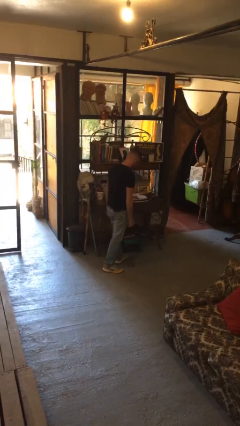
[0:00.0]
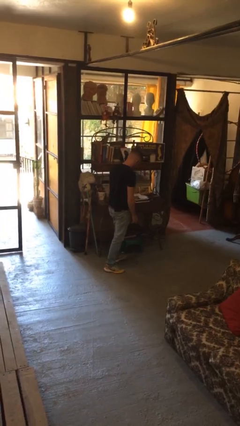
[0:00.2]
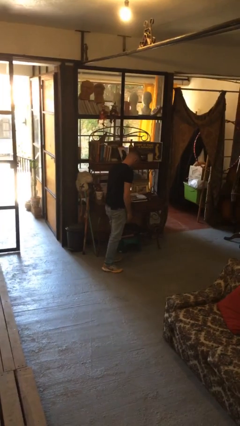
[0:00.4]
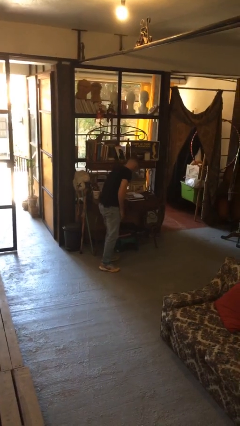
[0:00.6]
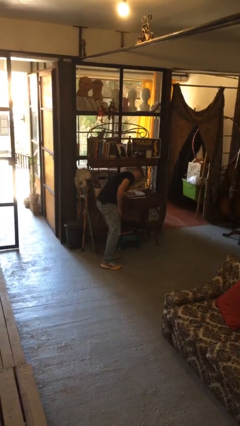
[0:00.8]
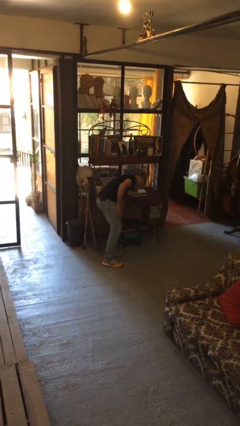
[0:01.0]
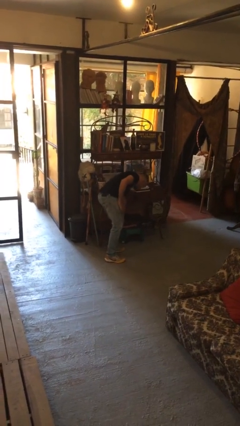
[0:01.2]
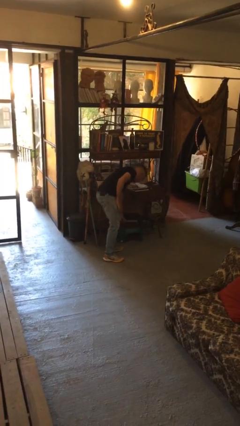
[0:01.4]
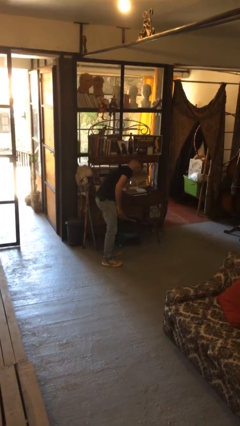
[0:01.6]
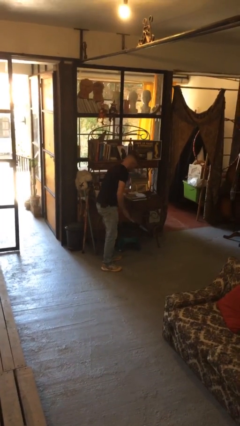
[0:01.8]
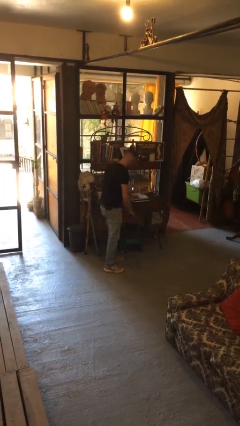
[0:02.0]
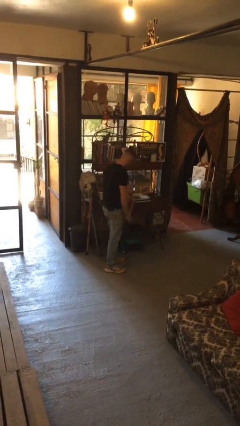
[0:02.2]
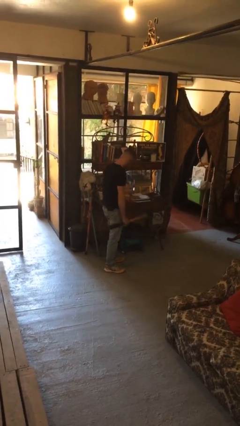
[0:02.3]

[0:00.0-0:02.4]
person picks up object from cabinet

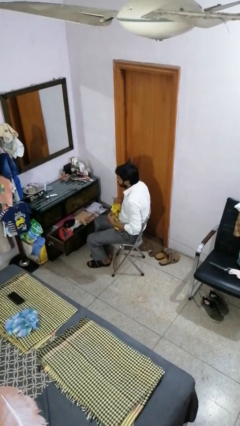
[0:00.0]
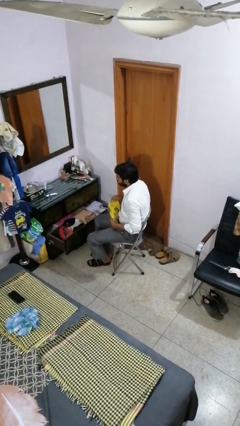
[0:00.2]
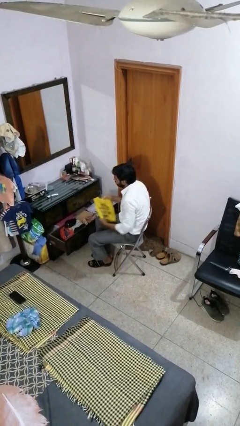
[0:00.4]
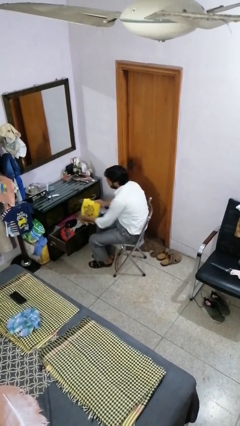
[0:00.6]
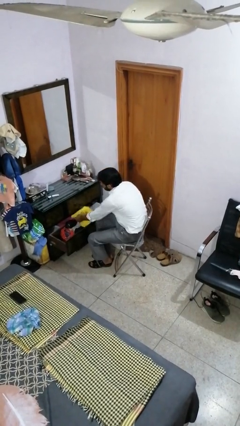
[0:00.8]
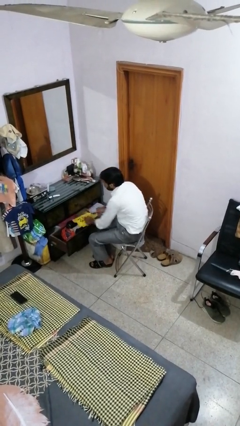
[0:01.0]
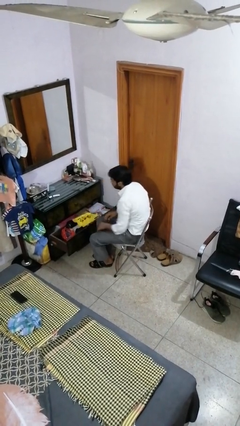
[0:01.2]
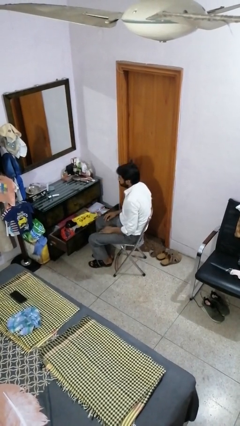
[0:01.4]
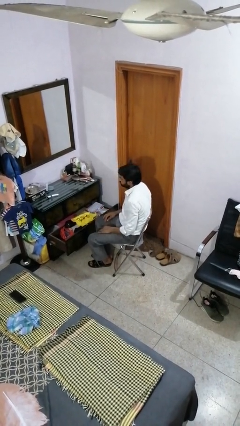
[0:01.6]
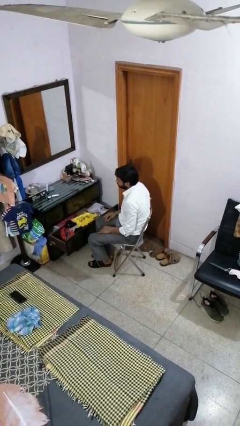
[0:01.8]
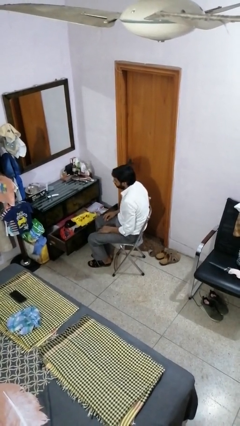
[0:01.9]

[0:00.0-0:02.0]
person puts clothes into dresser

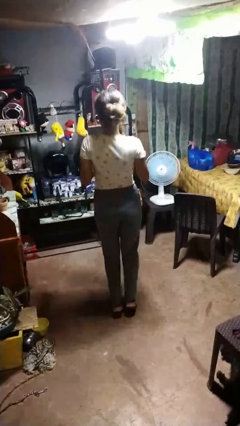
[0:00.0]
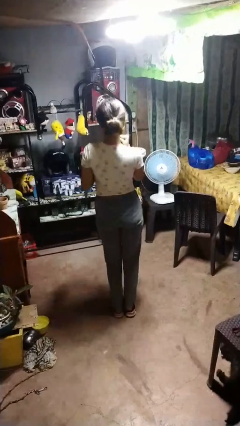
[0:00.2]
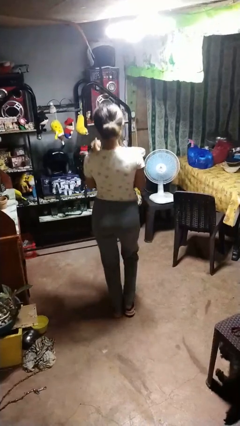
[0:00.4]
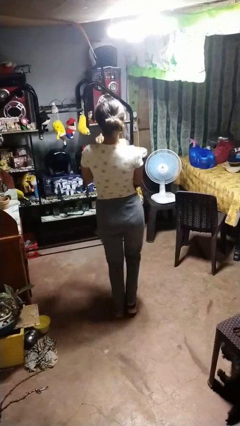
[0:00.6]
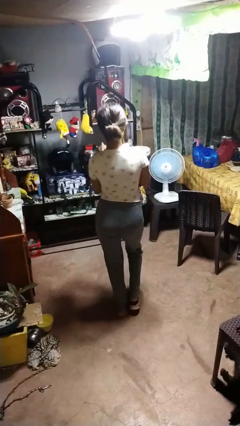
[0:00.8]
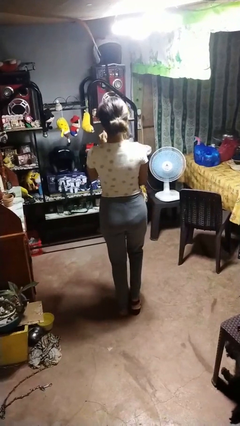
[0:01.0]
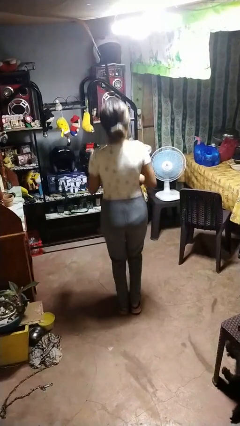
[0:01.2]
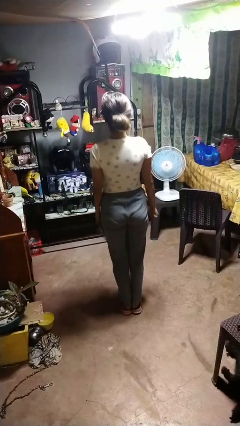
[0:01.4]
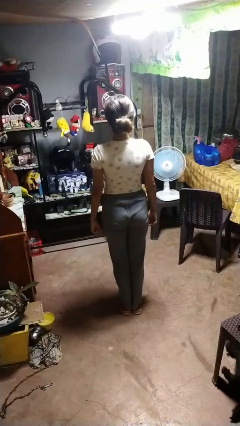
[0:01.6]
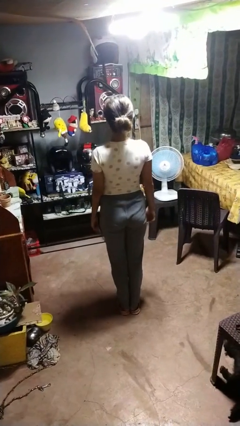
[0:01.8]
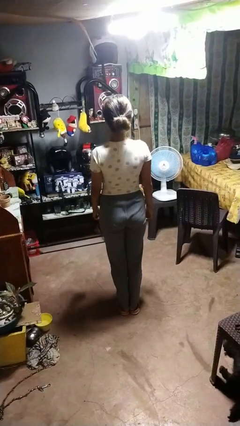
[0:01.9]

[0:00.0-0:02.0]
person dances in place

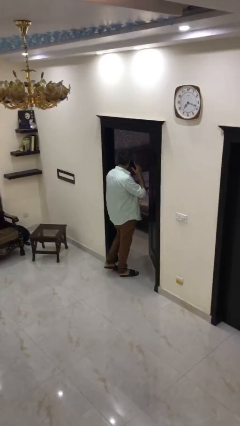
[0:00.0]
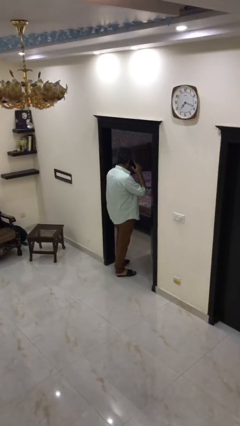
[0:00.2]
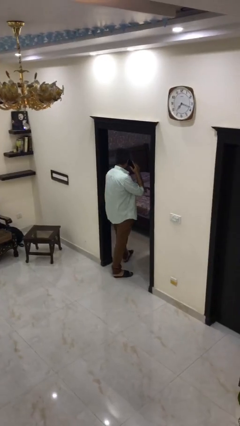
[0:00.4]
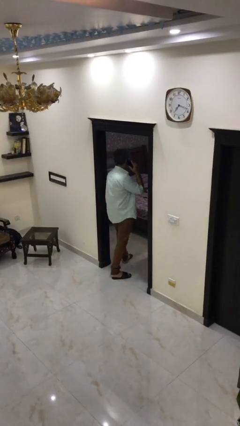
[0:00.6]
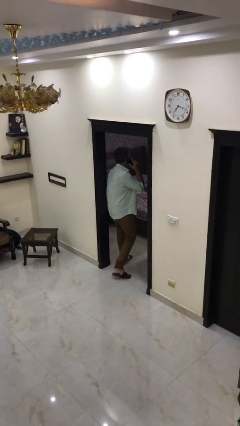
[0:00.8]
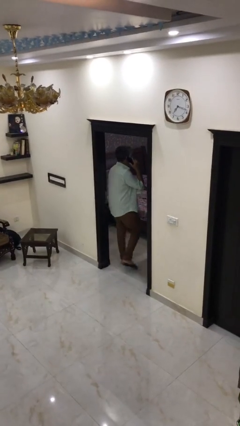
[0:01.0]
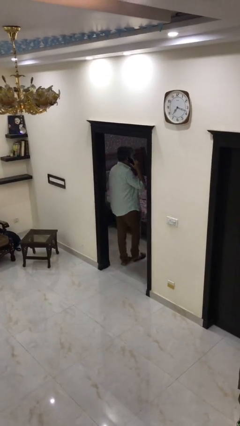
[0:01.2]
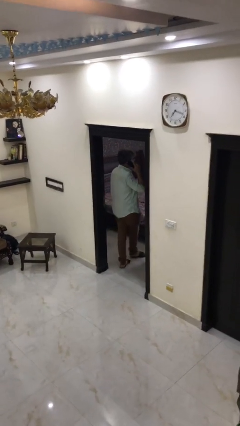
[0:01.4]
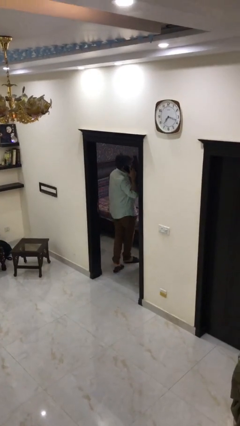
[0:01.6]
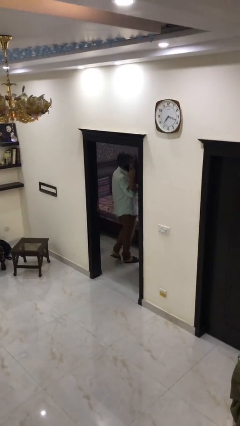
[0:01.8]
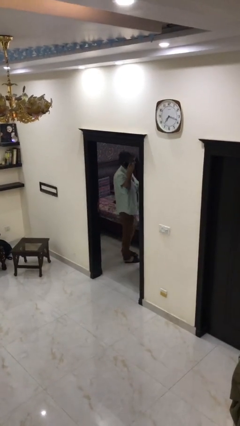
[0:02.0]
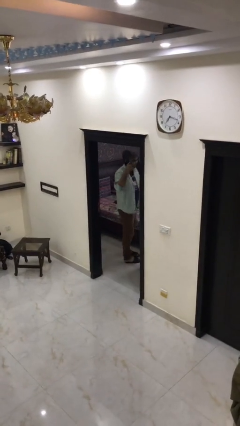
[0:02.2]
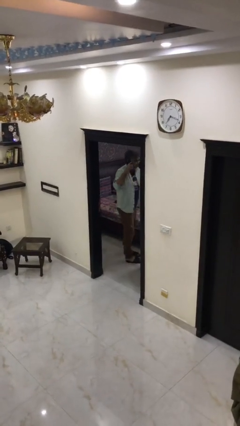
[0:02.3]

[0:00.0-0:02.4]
person exits scene through structure

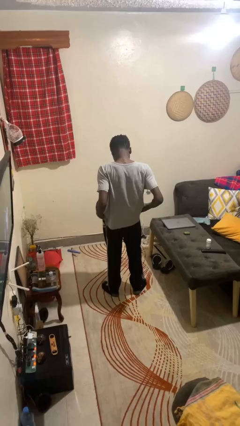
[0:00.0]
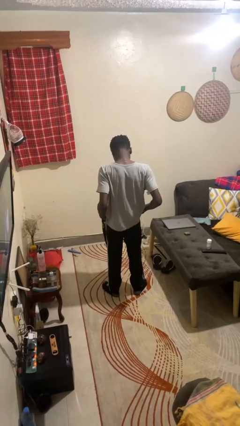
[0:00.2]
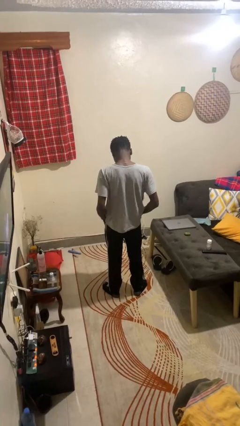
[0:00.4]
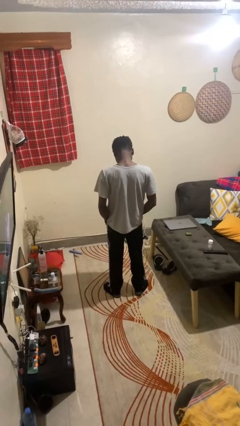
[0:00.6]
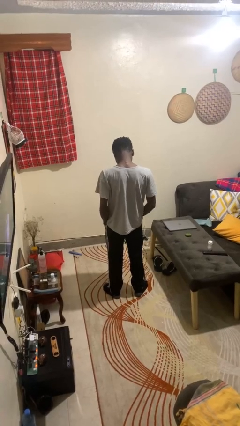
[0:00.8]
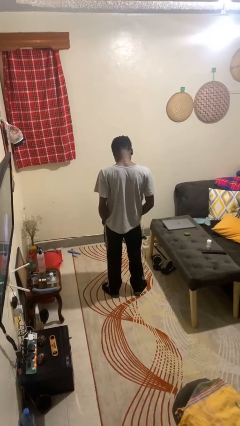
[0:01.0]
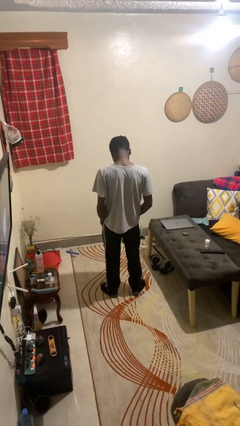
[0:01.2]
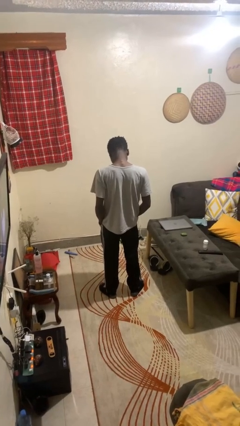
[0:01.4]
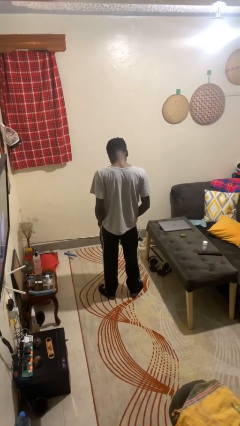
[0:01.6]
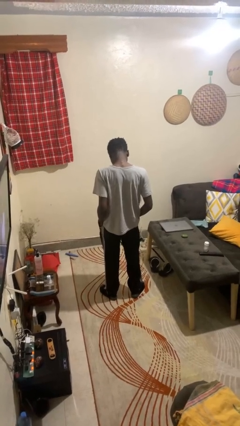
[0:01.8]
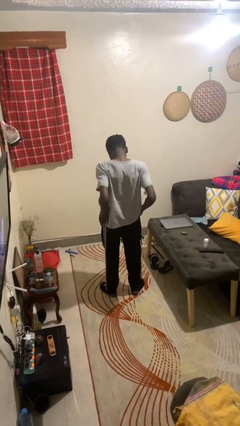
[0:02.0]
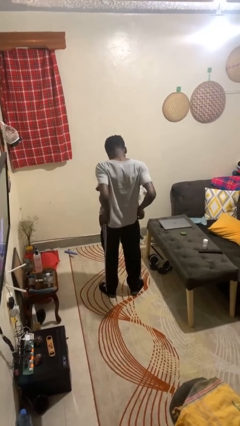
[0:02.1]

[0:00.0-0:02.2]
person puts hands in back pockets

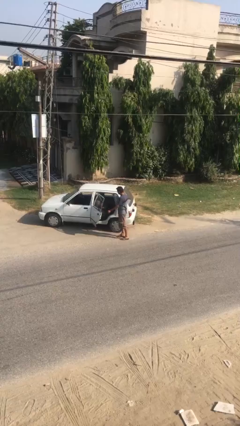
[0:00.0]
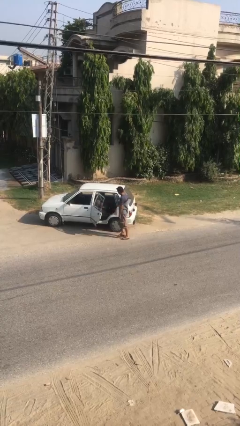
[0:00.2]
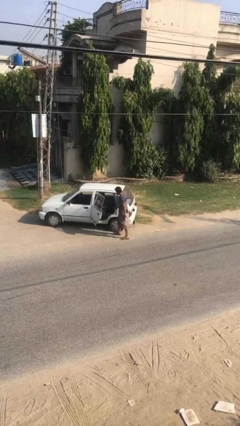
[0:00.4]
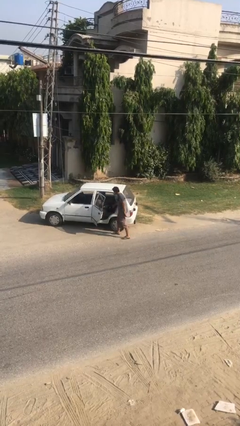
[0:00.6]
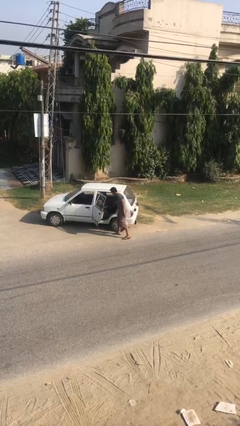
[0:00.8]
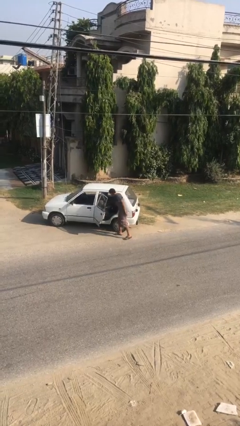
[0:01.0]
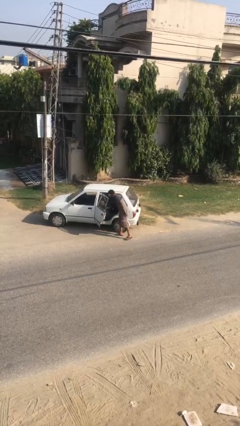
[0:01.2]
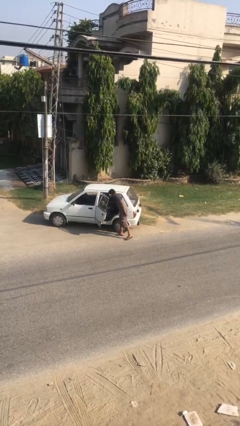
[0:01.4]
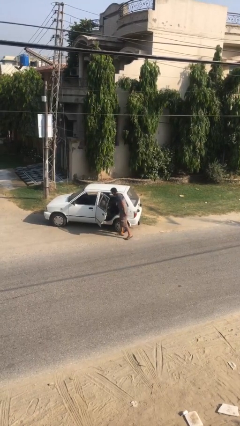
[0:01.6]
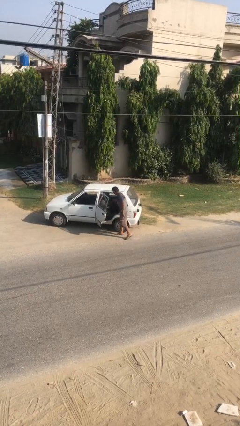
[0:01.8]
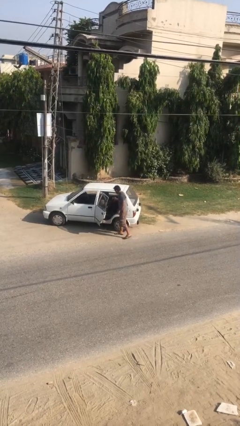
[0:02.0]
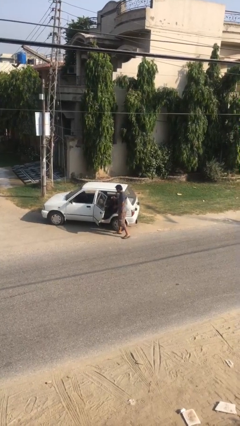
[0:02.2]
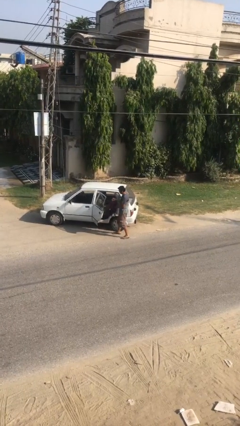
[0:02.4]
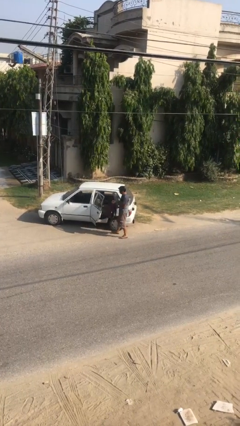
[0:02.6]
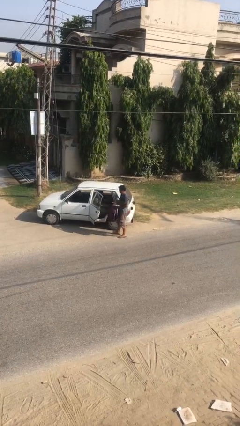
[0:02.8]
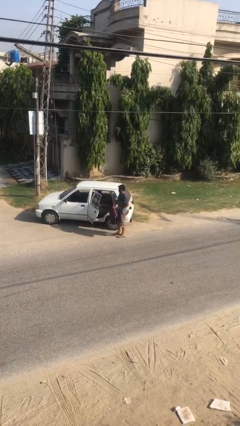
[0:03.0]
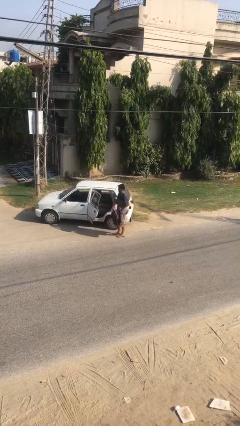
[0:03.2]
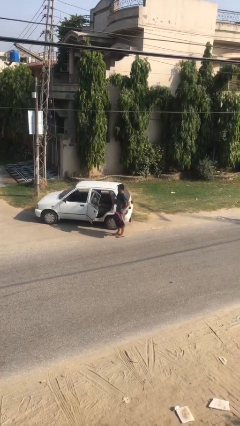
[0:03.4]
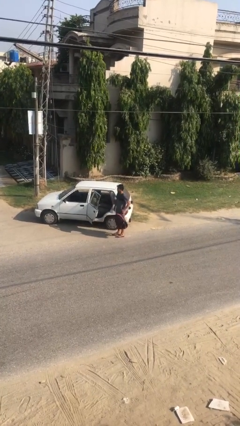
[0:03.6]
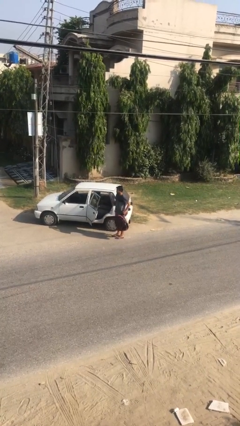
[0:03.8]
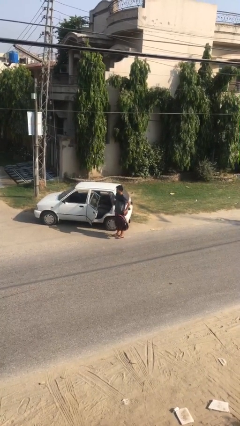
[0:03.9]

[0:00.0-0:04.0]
person unloads car

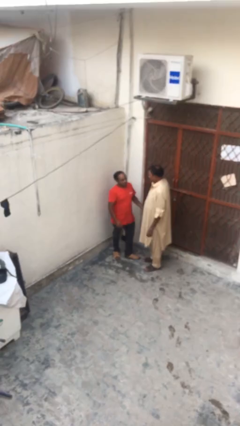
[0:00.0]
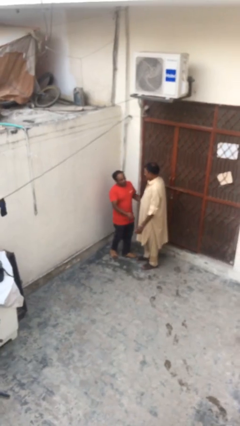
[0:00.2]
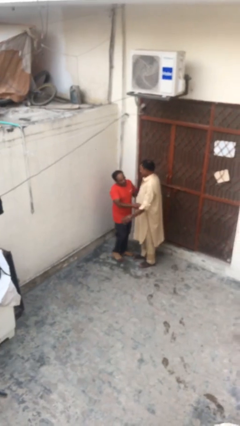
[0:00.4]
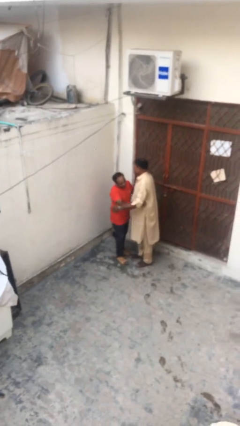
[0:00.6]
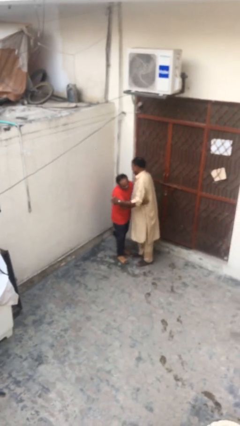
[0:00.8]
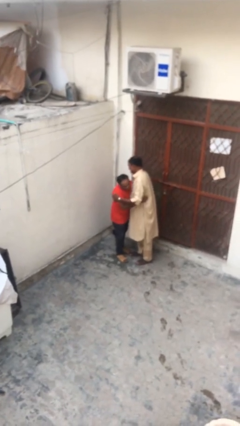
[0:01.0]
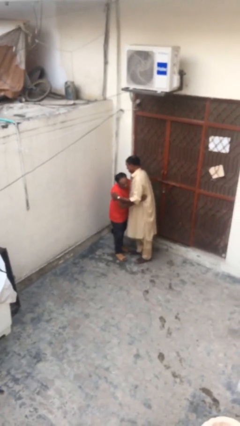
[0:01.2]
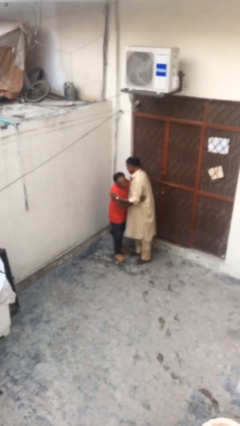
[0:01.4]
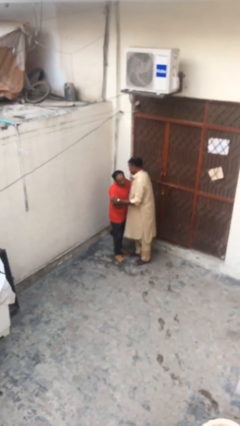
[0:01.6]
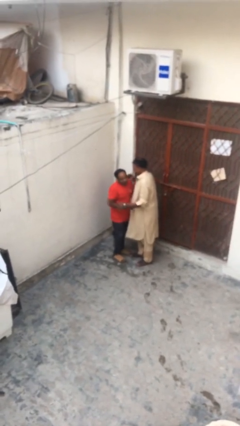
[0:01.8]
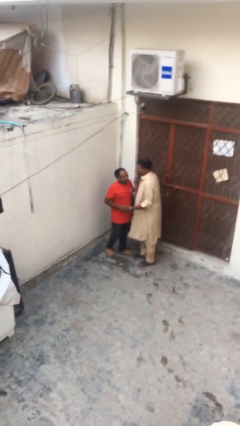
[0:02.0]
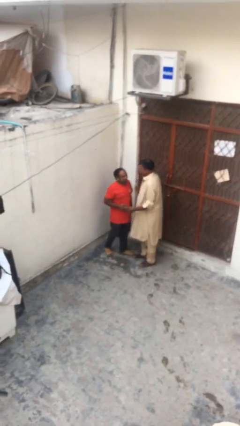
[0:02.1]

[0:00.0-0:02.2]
person embraces person
